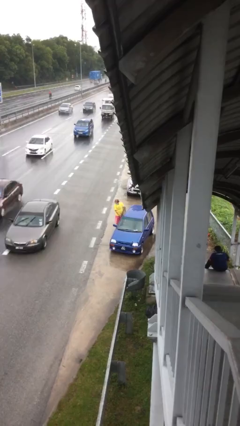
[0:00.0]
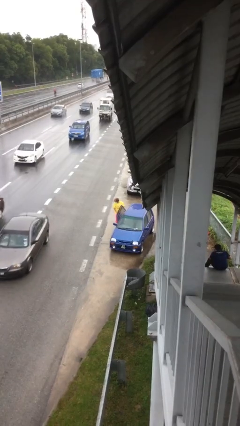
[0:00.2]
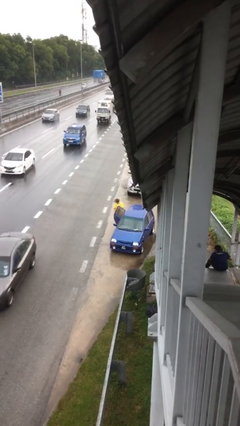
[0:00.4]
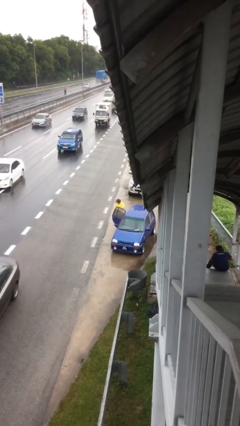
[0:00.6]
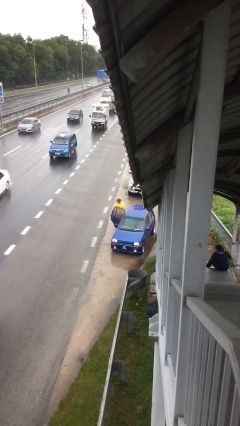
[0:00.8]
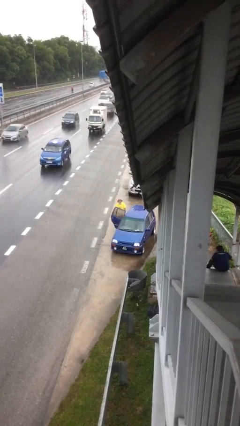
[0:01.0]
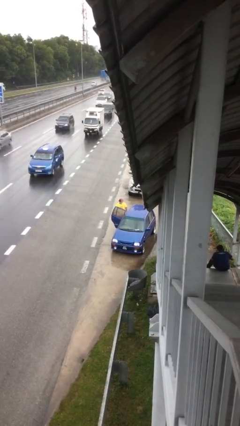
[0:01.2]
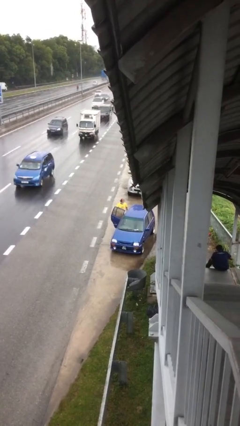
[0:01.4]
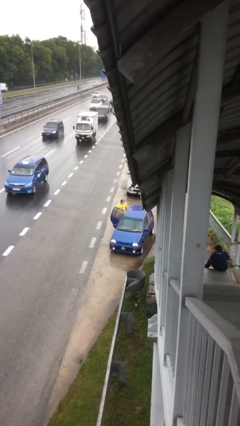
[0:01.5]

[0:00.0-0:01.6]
person opens car door

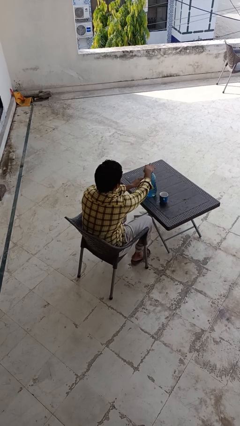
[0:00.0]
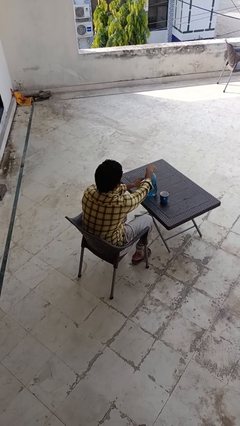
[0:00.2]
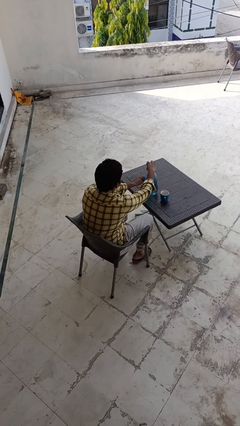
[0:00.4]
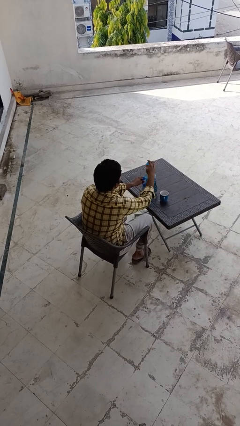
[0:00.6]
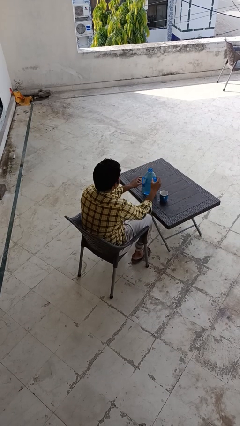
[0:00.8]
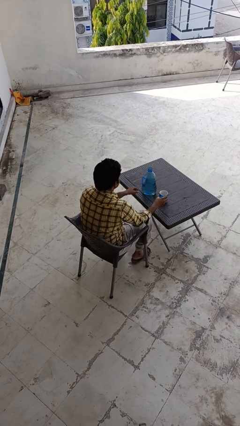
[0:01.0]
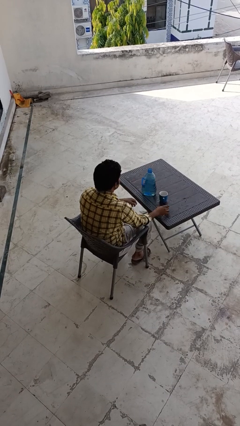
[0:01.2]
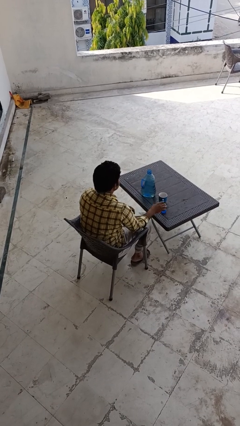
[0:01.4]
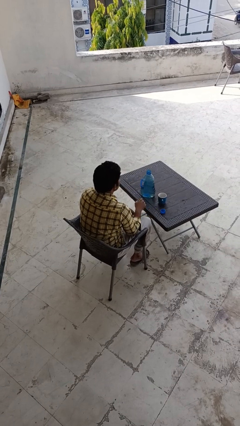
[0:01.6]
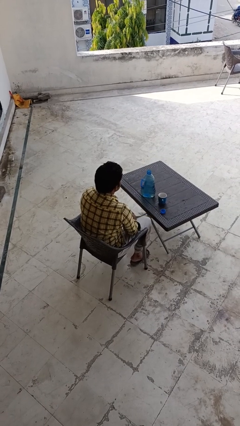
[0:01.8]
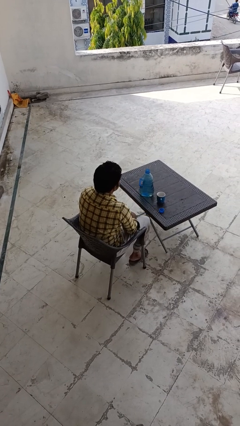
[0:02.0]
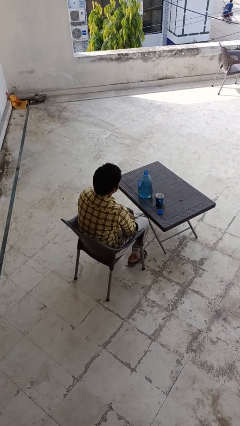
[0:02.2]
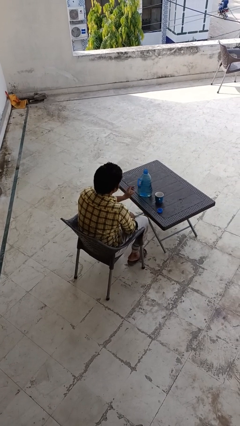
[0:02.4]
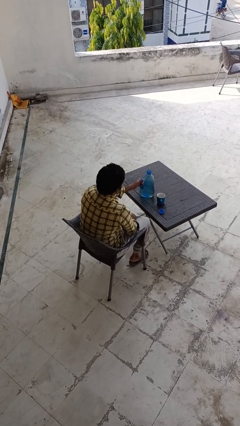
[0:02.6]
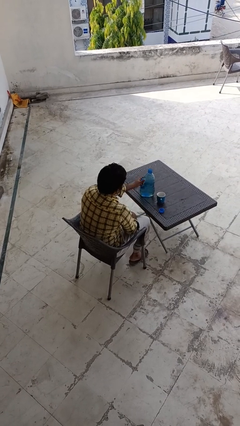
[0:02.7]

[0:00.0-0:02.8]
person unscrews lid from bottle

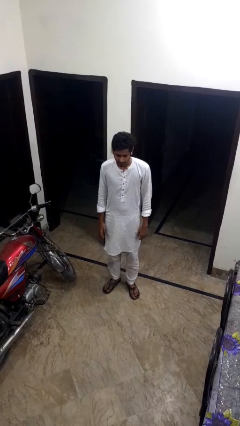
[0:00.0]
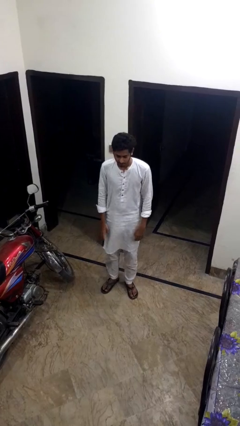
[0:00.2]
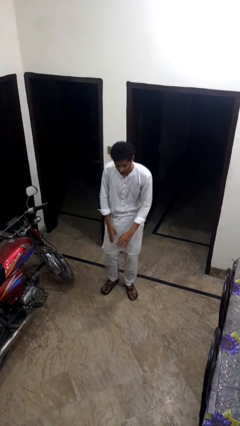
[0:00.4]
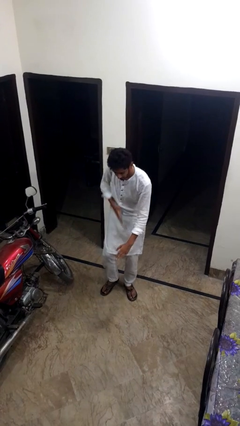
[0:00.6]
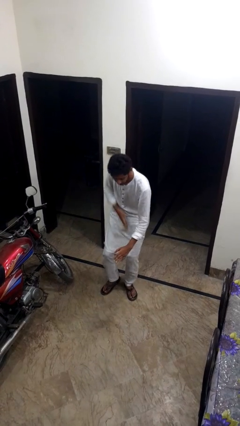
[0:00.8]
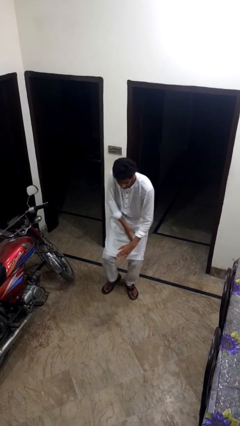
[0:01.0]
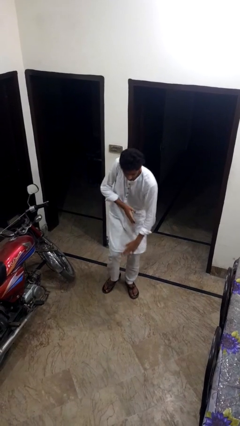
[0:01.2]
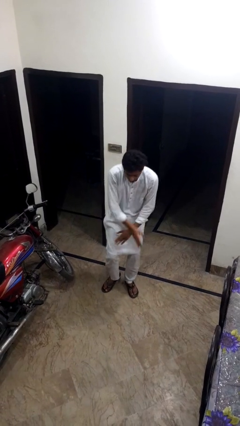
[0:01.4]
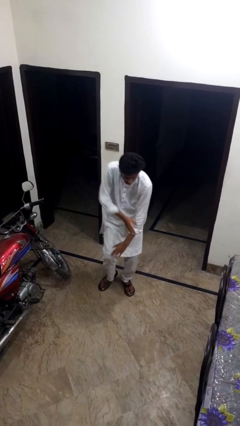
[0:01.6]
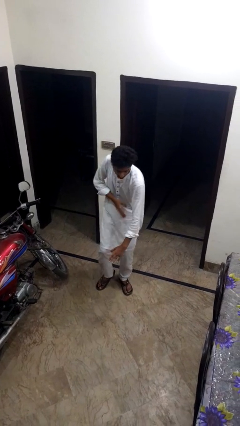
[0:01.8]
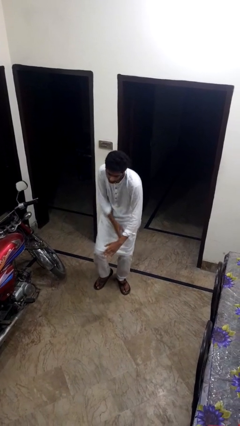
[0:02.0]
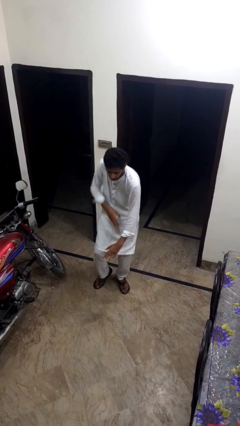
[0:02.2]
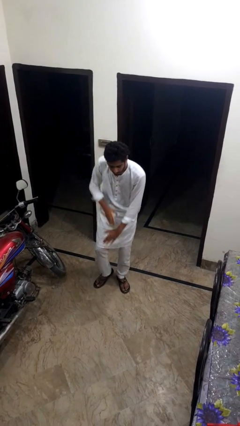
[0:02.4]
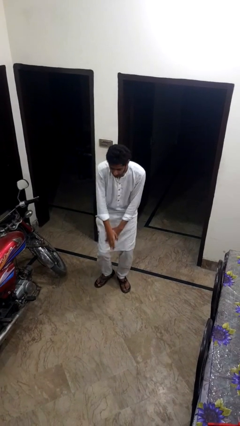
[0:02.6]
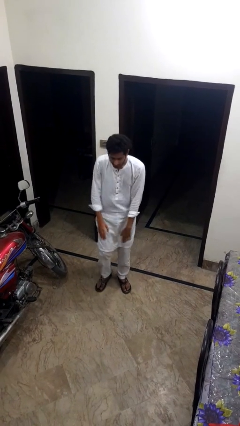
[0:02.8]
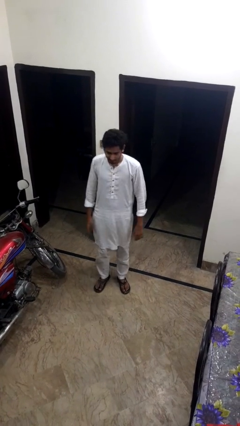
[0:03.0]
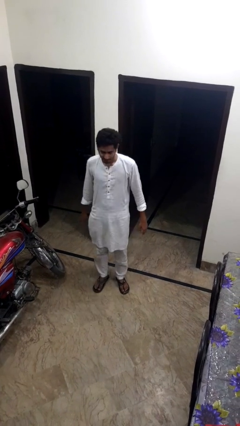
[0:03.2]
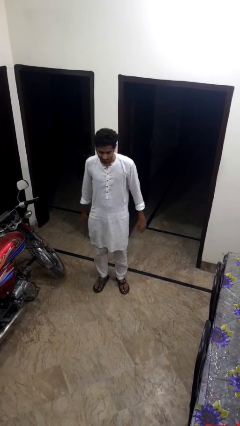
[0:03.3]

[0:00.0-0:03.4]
person dances in place

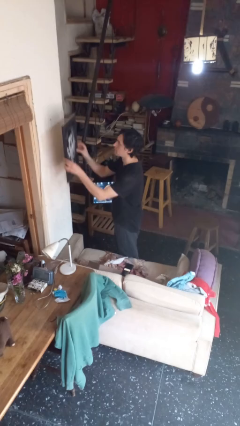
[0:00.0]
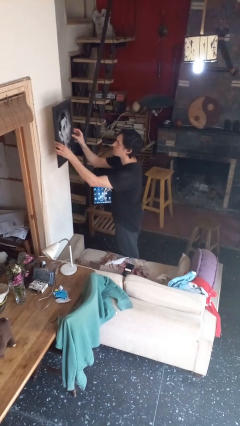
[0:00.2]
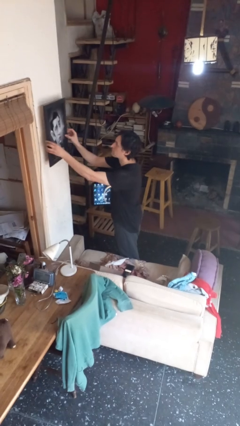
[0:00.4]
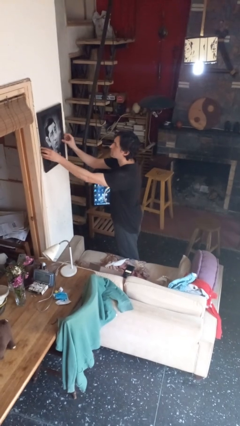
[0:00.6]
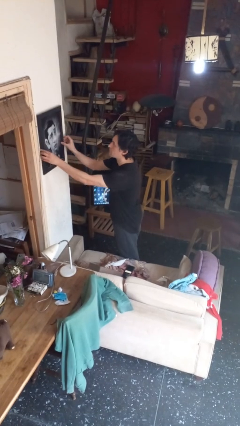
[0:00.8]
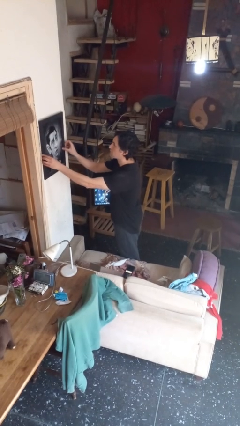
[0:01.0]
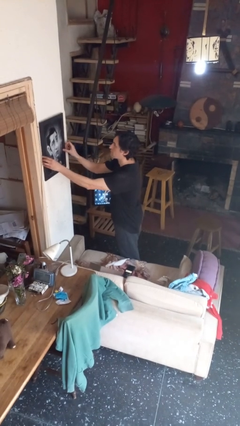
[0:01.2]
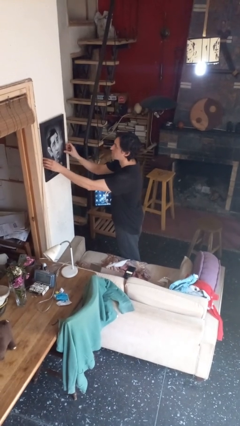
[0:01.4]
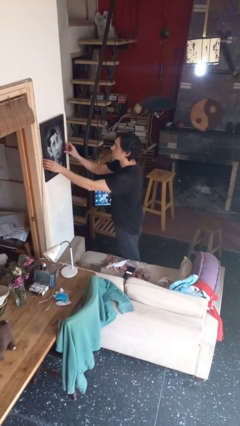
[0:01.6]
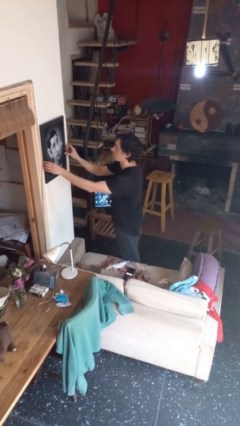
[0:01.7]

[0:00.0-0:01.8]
person puts up picture frame

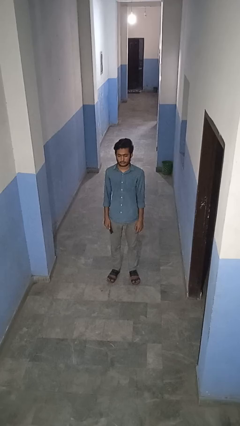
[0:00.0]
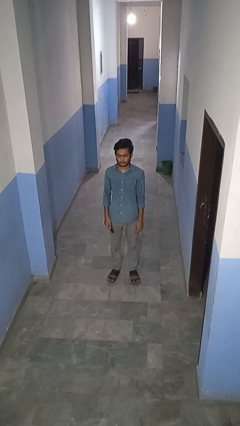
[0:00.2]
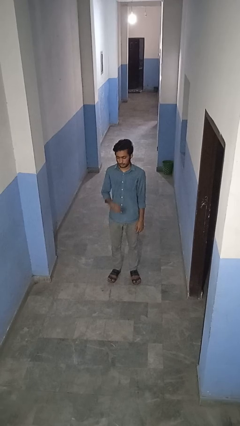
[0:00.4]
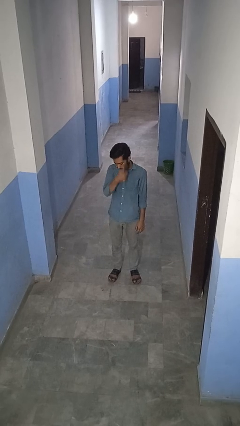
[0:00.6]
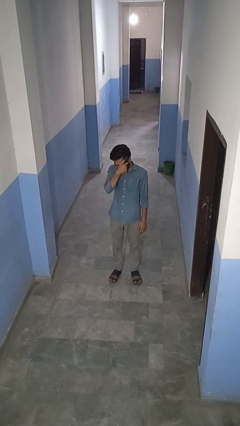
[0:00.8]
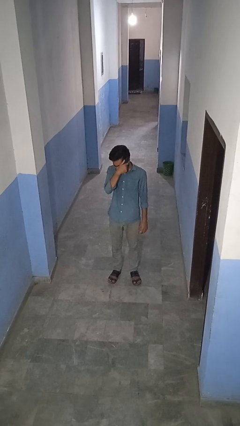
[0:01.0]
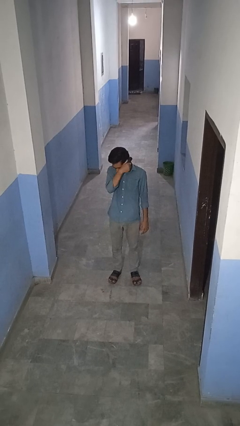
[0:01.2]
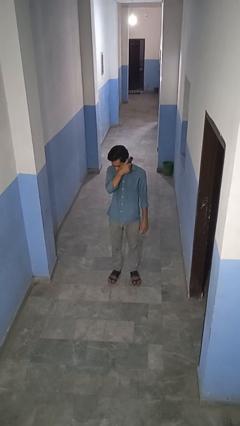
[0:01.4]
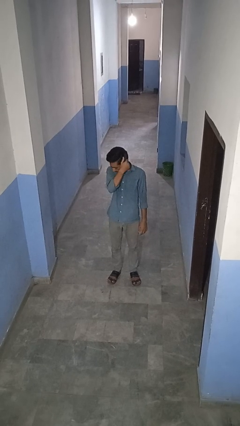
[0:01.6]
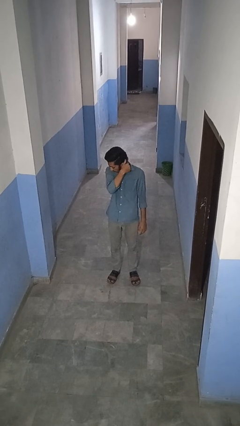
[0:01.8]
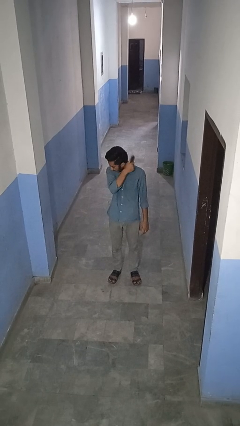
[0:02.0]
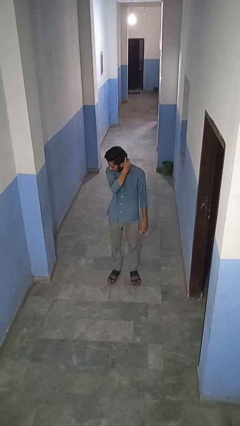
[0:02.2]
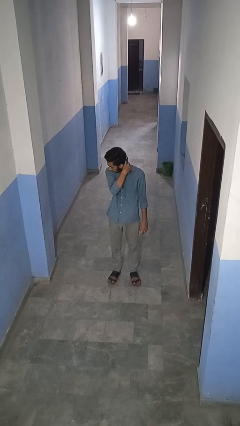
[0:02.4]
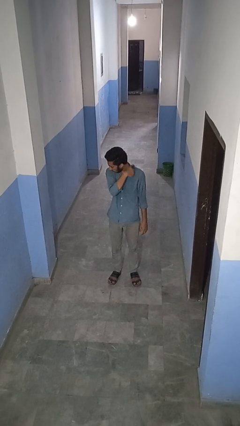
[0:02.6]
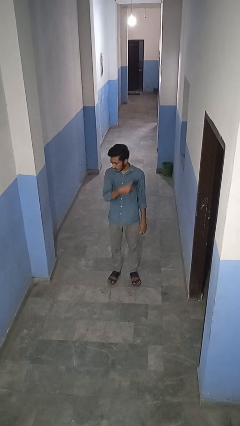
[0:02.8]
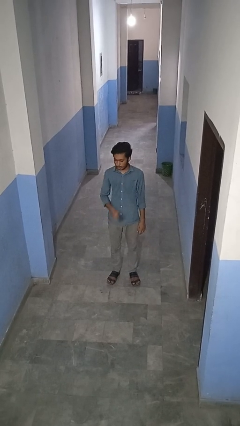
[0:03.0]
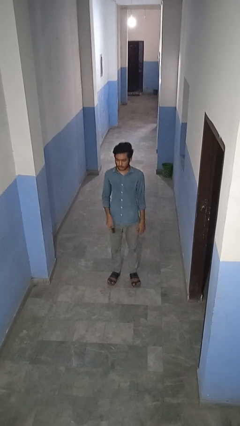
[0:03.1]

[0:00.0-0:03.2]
person brushes hair

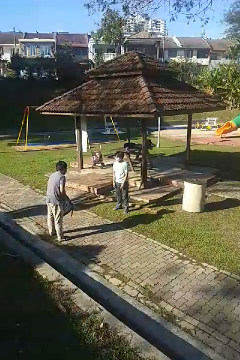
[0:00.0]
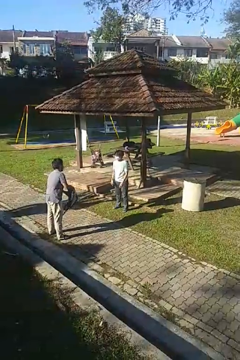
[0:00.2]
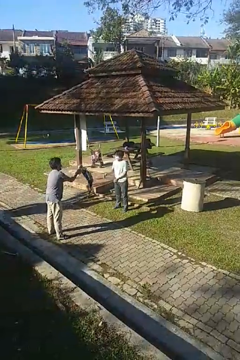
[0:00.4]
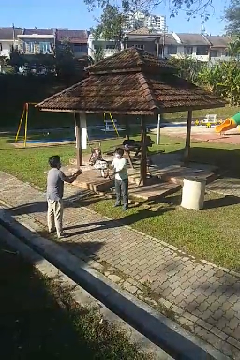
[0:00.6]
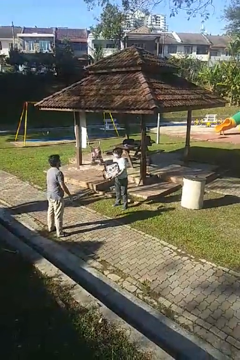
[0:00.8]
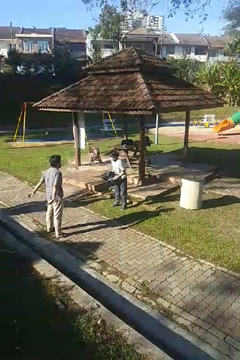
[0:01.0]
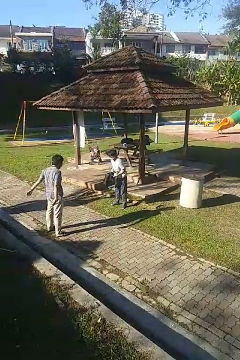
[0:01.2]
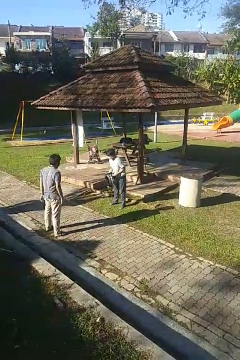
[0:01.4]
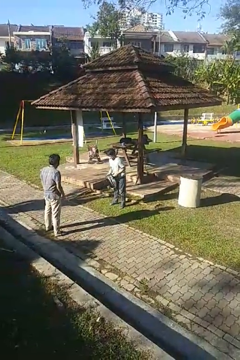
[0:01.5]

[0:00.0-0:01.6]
person catches object from person

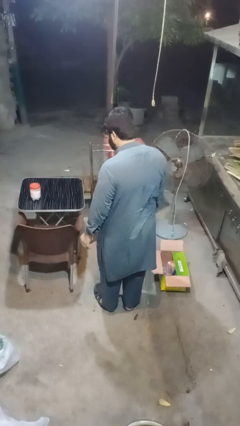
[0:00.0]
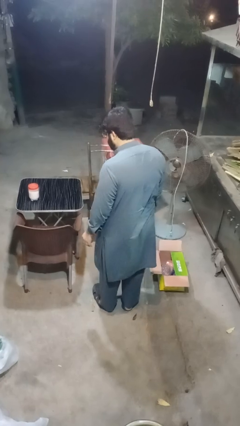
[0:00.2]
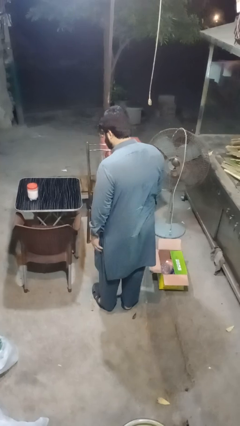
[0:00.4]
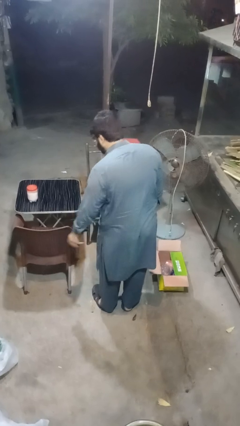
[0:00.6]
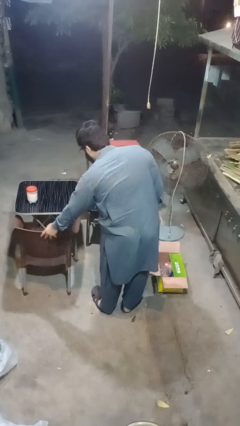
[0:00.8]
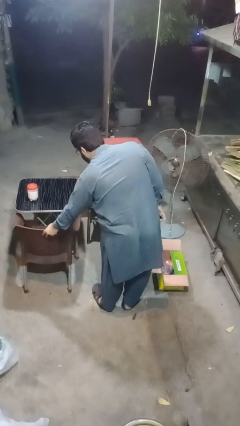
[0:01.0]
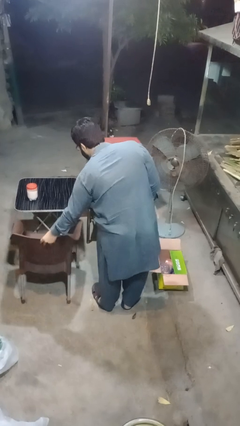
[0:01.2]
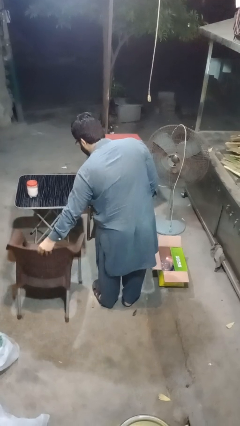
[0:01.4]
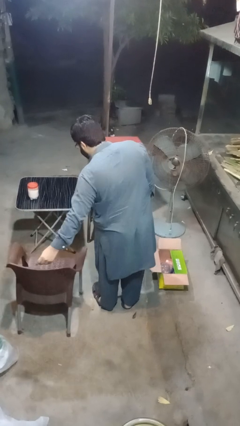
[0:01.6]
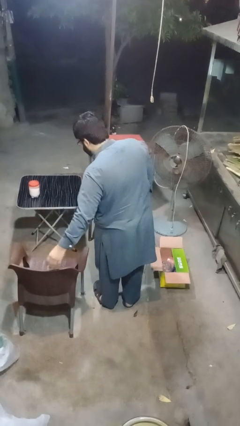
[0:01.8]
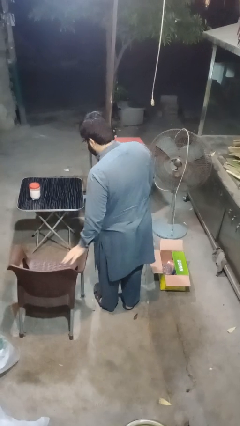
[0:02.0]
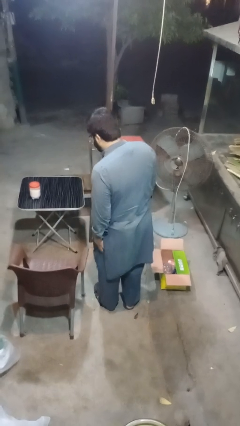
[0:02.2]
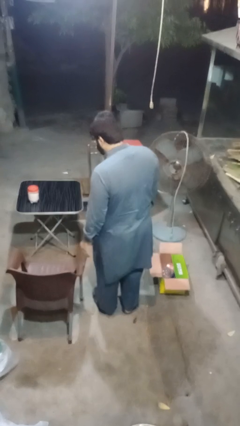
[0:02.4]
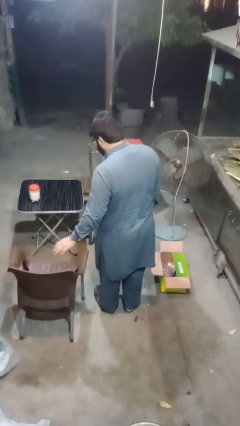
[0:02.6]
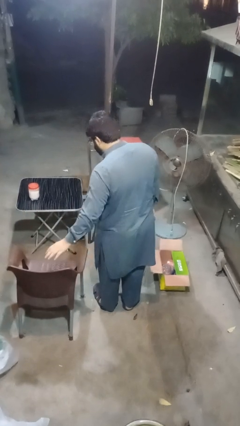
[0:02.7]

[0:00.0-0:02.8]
person pulls out chair
